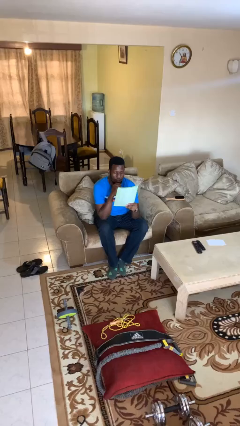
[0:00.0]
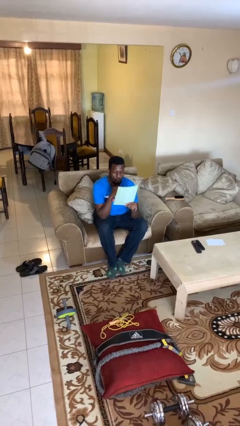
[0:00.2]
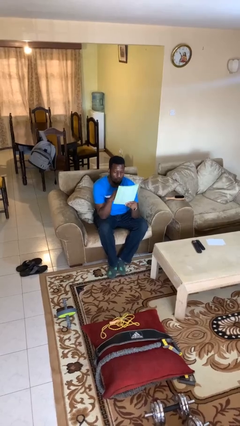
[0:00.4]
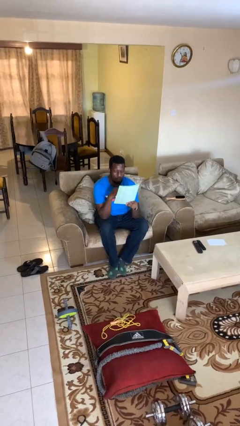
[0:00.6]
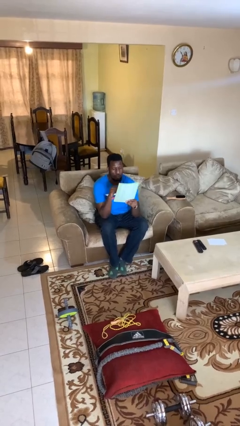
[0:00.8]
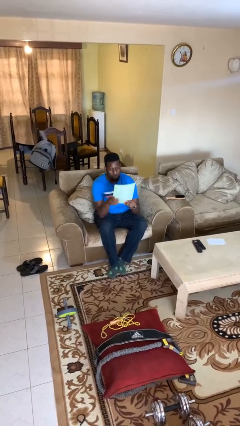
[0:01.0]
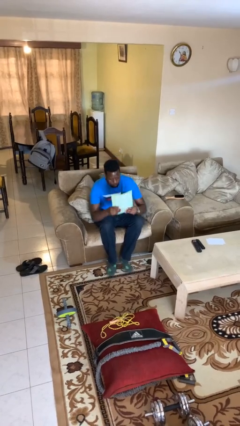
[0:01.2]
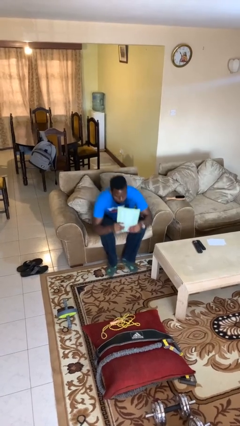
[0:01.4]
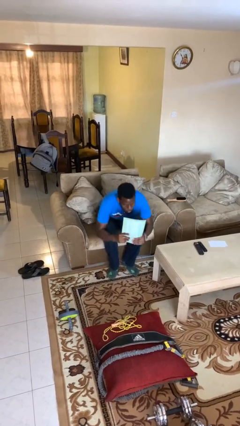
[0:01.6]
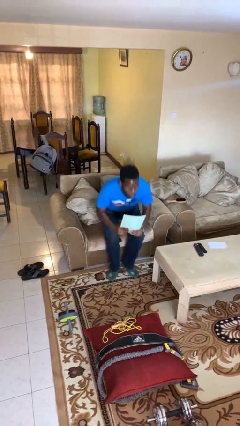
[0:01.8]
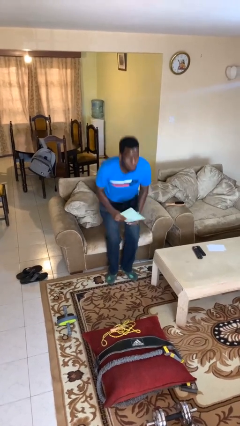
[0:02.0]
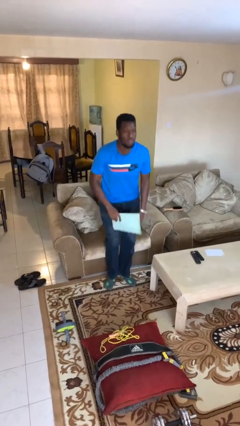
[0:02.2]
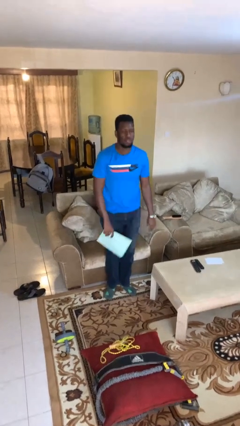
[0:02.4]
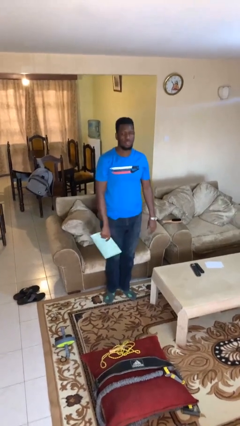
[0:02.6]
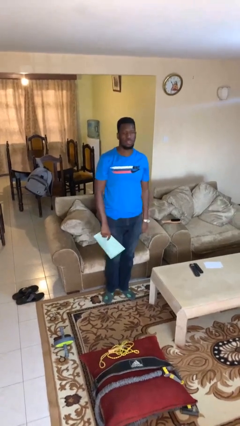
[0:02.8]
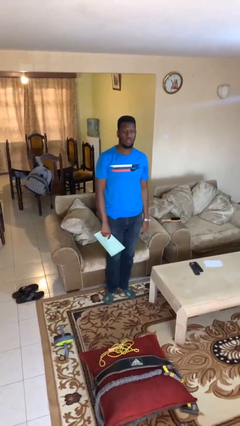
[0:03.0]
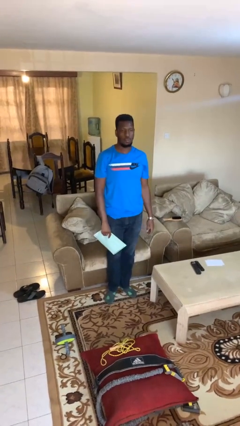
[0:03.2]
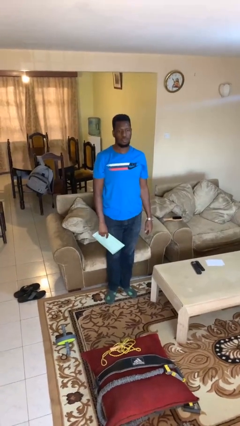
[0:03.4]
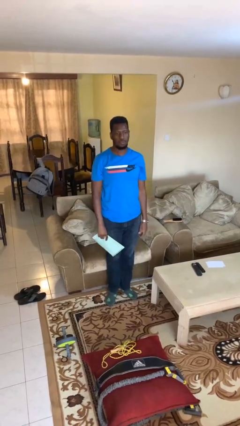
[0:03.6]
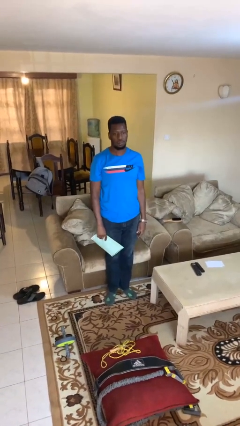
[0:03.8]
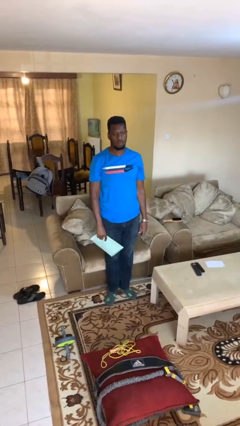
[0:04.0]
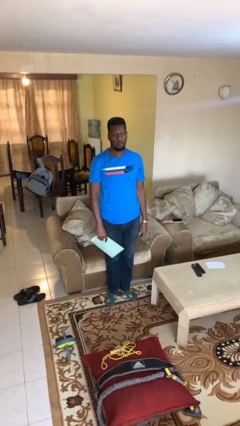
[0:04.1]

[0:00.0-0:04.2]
person stands up

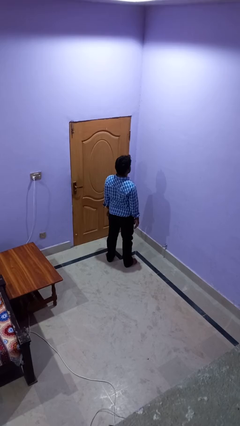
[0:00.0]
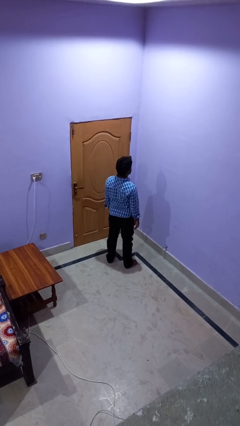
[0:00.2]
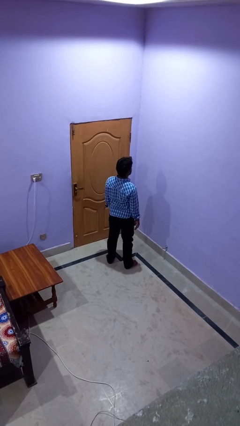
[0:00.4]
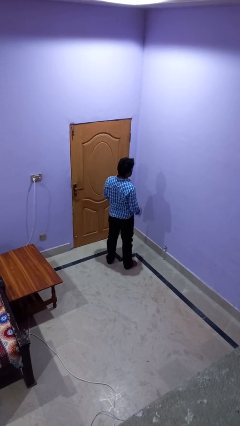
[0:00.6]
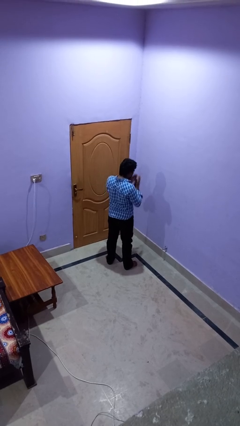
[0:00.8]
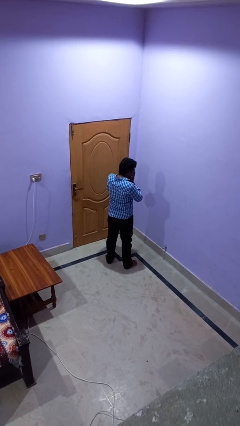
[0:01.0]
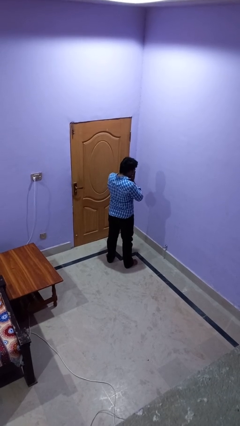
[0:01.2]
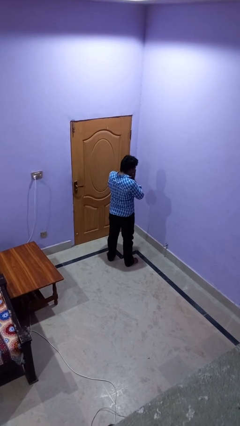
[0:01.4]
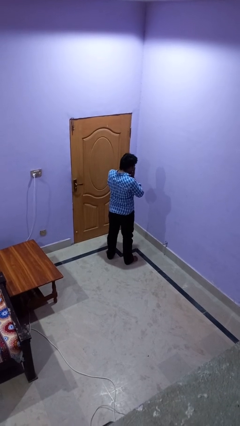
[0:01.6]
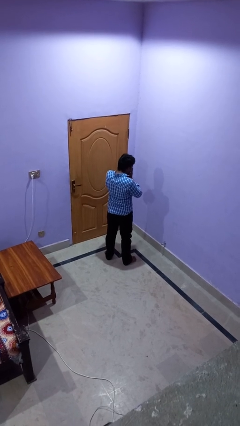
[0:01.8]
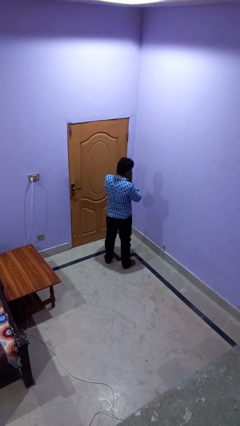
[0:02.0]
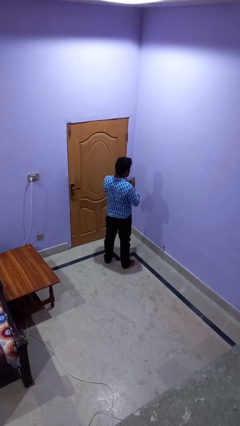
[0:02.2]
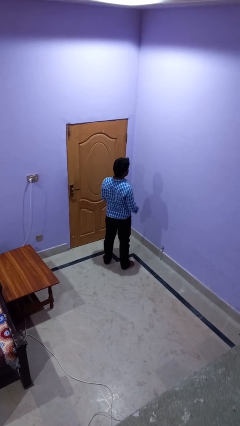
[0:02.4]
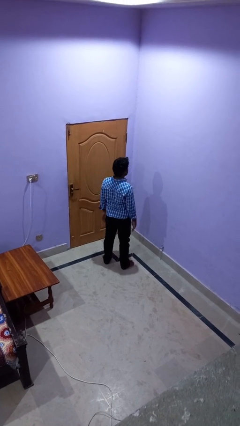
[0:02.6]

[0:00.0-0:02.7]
person sneezes into hand

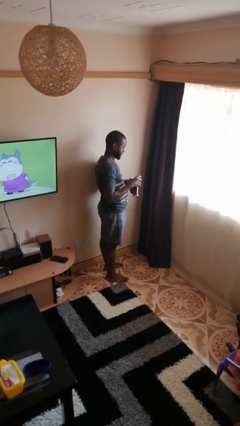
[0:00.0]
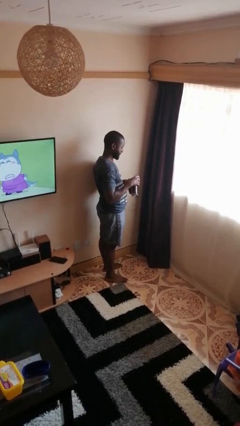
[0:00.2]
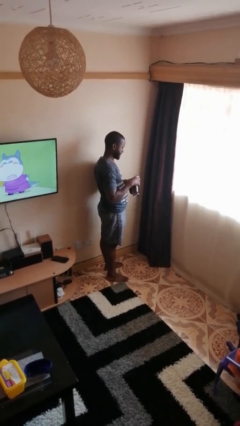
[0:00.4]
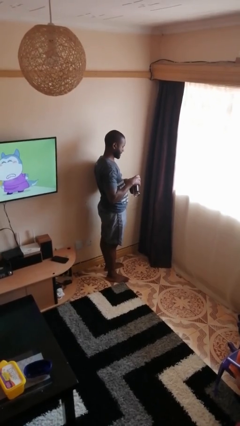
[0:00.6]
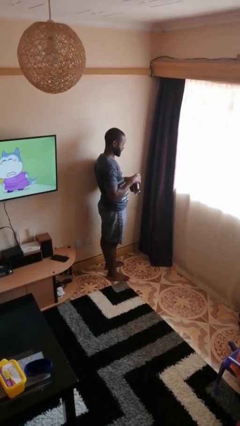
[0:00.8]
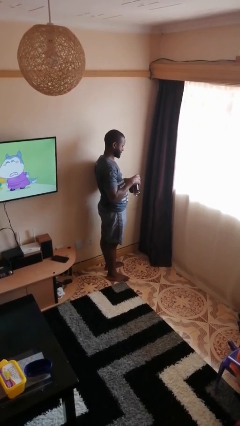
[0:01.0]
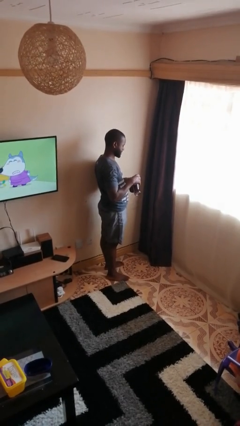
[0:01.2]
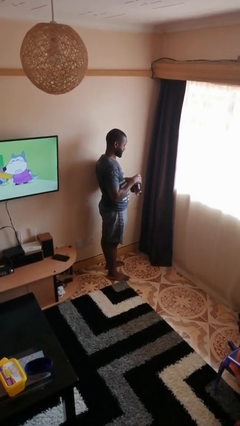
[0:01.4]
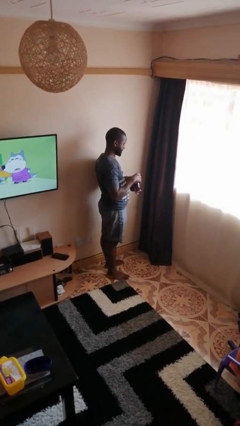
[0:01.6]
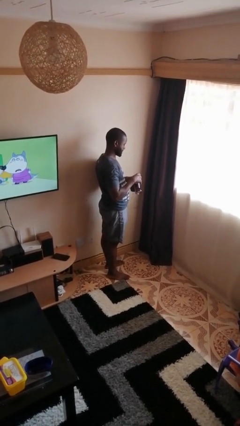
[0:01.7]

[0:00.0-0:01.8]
person pours coffee into mug

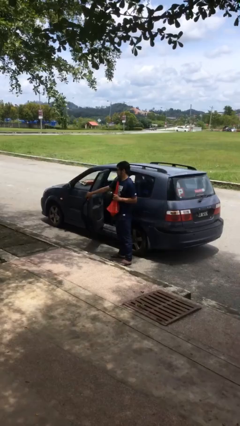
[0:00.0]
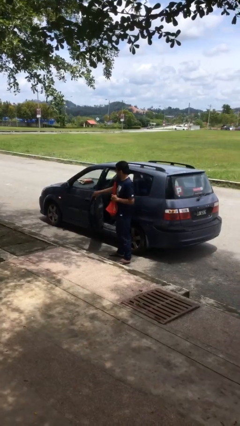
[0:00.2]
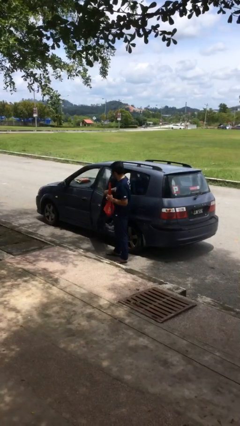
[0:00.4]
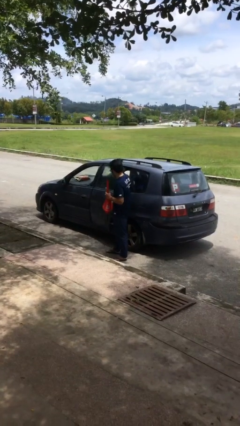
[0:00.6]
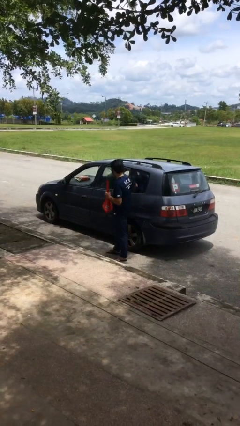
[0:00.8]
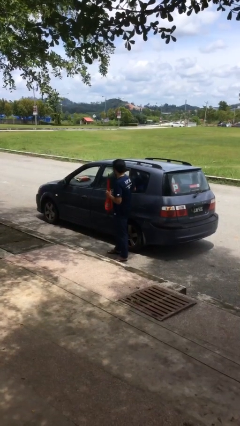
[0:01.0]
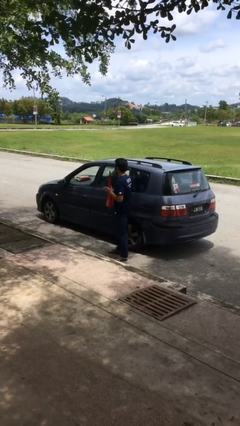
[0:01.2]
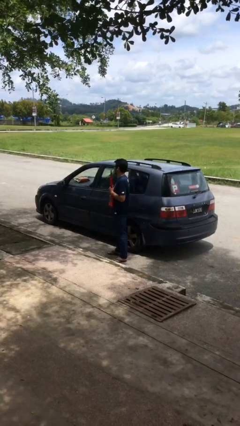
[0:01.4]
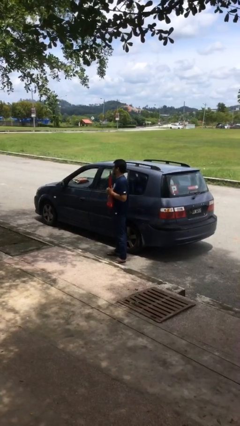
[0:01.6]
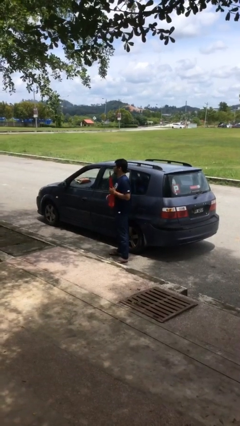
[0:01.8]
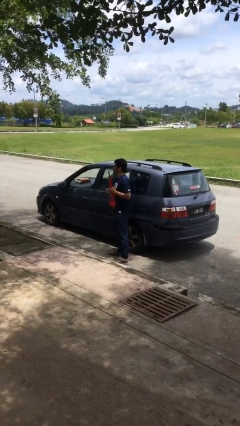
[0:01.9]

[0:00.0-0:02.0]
person closes car door

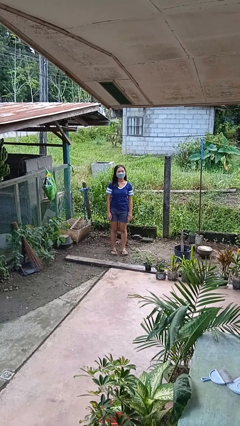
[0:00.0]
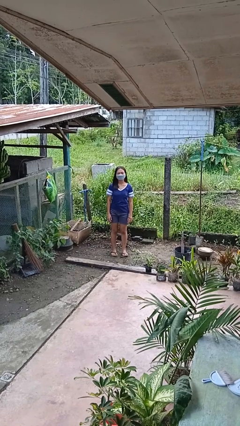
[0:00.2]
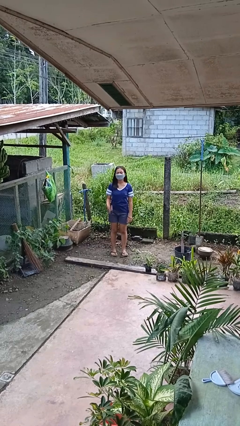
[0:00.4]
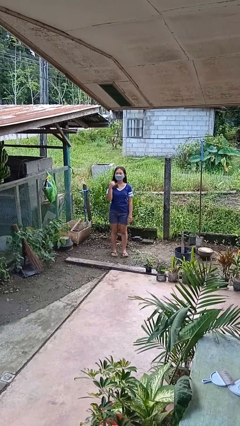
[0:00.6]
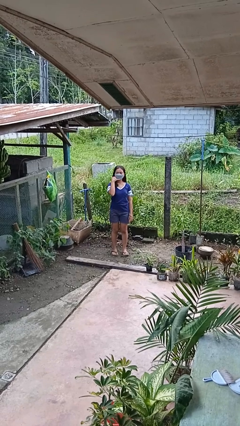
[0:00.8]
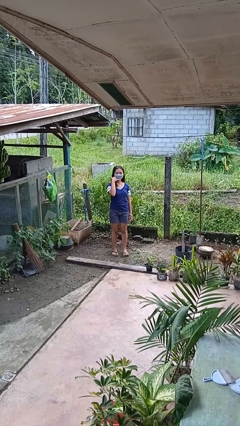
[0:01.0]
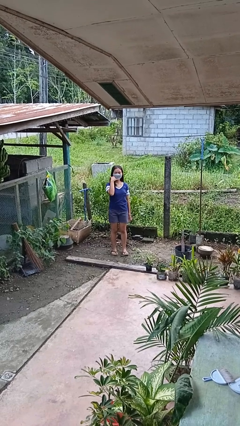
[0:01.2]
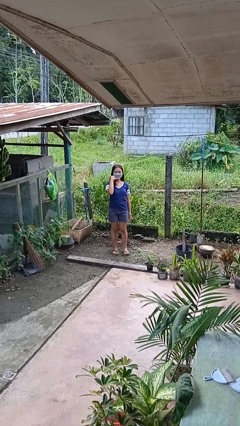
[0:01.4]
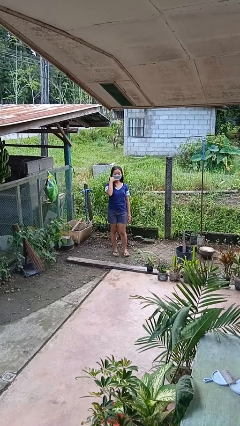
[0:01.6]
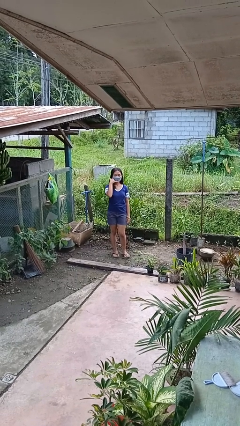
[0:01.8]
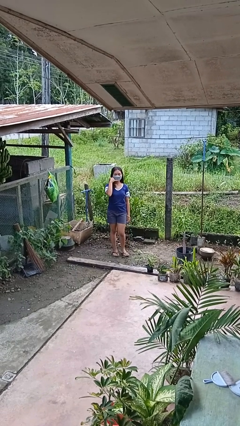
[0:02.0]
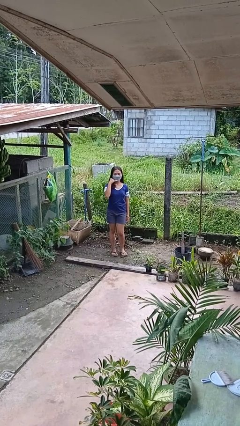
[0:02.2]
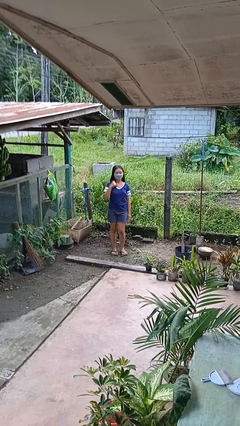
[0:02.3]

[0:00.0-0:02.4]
person gestures call me

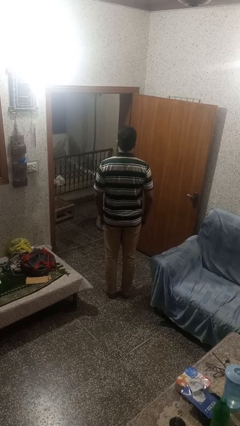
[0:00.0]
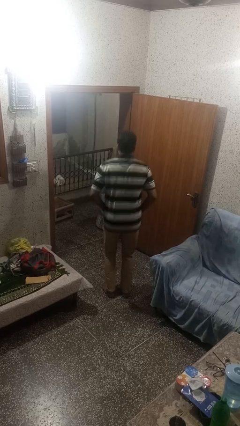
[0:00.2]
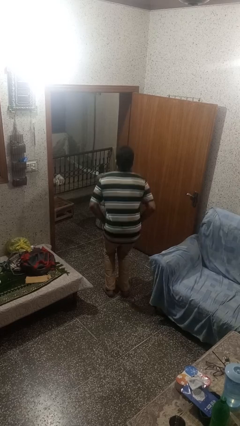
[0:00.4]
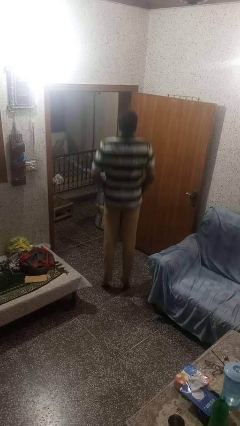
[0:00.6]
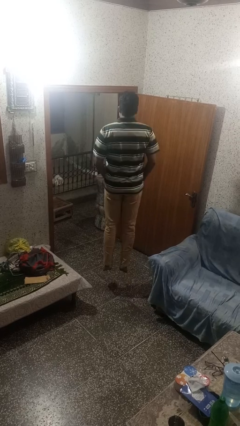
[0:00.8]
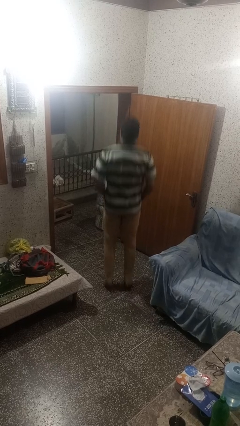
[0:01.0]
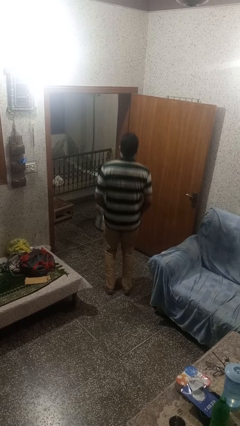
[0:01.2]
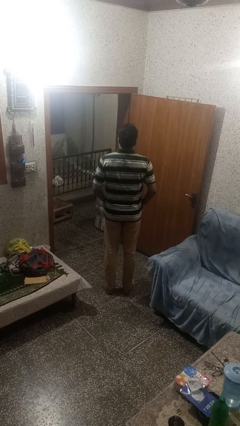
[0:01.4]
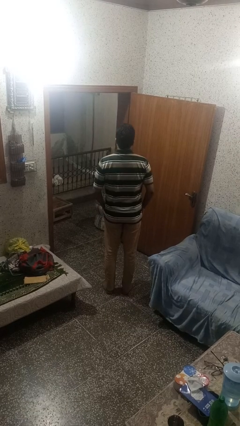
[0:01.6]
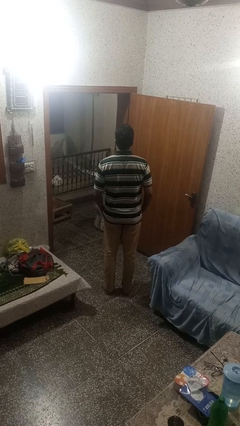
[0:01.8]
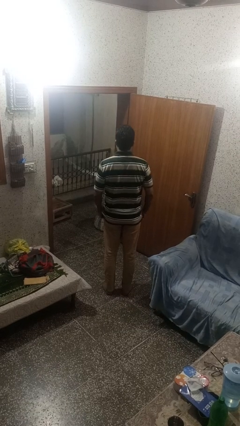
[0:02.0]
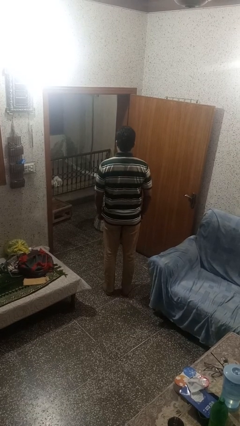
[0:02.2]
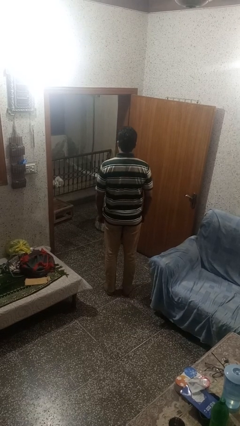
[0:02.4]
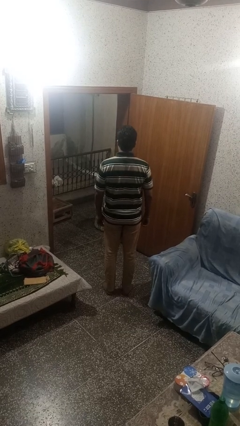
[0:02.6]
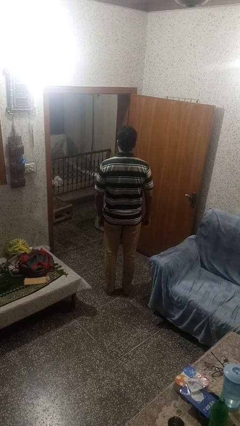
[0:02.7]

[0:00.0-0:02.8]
person jumps

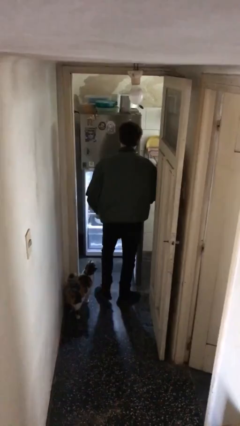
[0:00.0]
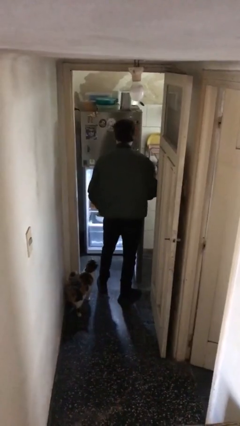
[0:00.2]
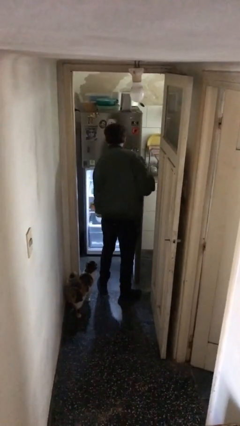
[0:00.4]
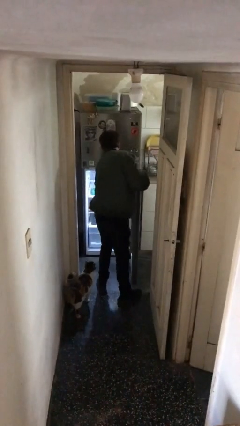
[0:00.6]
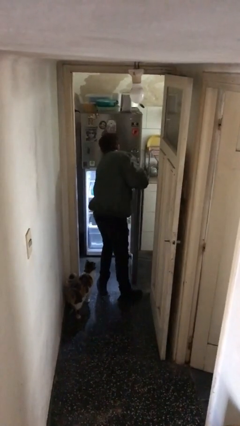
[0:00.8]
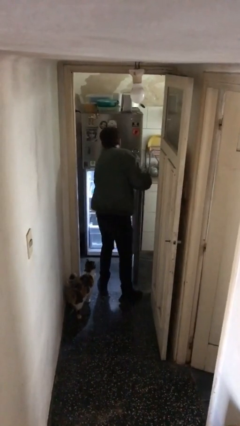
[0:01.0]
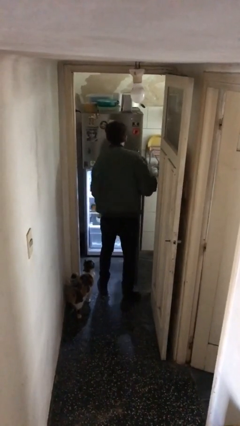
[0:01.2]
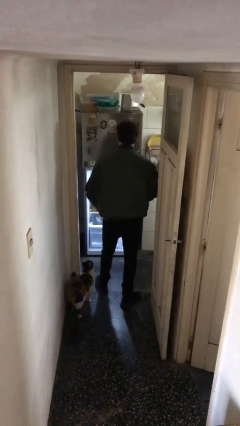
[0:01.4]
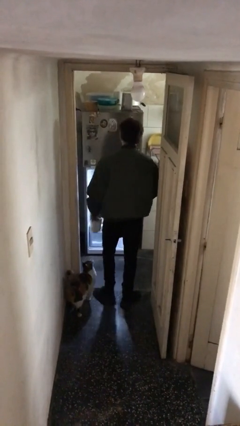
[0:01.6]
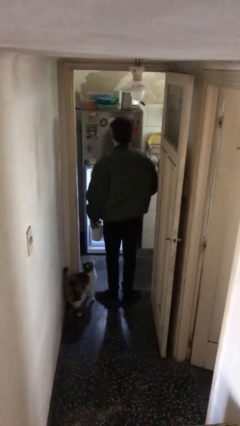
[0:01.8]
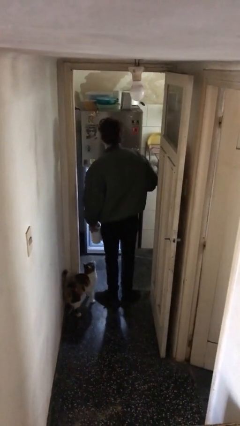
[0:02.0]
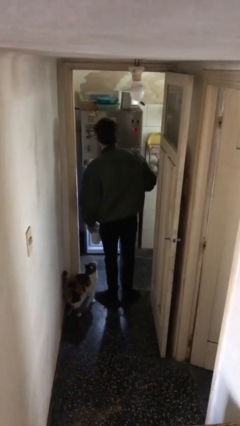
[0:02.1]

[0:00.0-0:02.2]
person takes object from refrigerator
